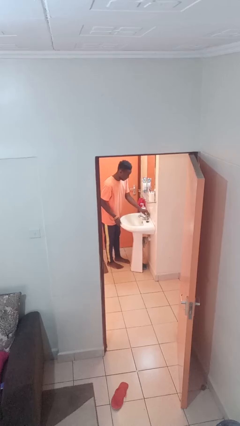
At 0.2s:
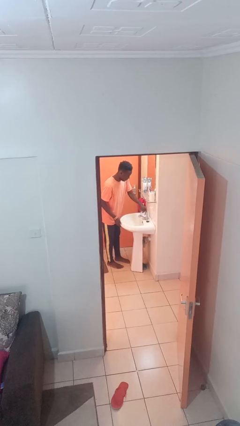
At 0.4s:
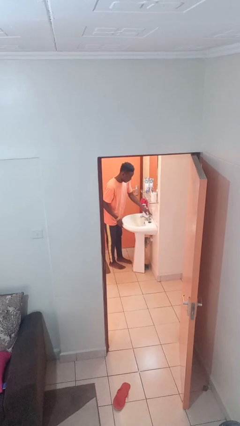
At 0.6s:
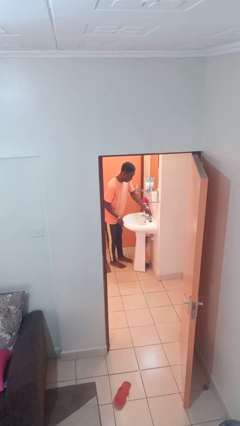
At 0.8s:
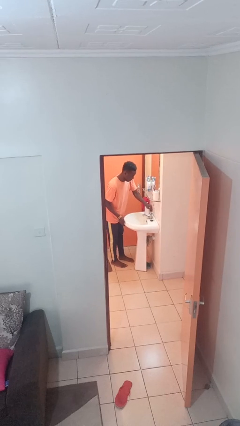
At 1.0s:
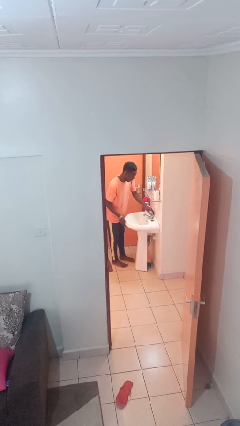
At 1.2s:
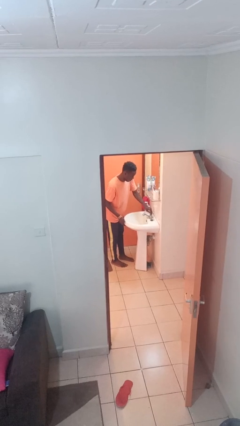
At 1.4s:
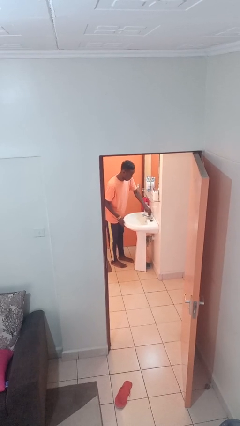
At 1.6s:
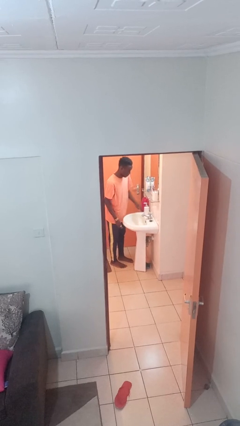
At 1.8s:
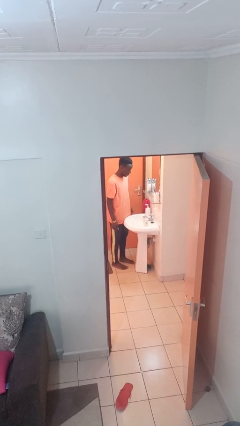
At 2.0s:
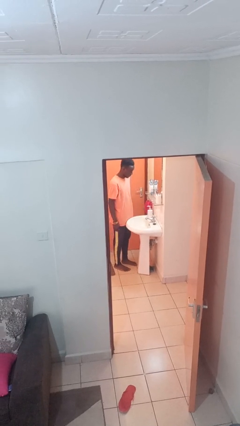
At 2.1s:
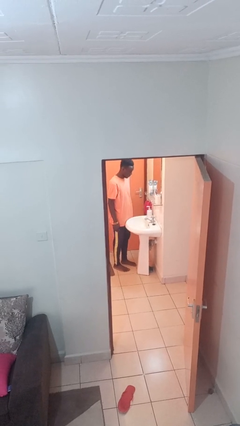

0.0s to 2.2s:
person turns off faucet

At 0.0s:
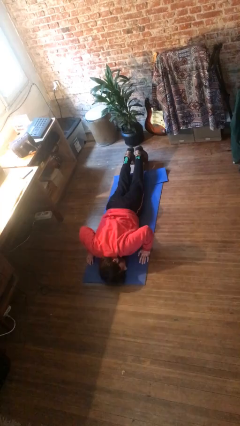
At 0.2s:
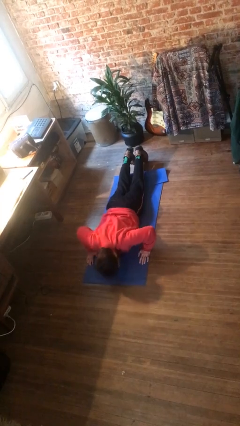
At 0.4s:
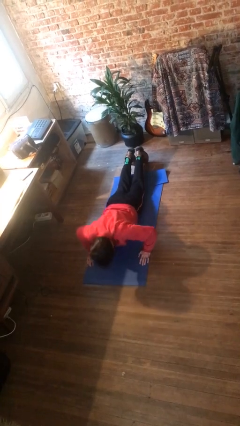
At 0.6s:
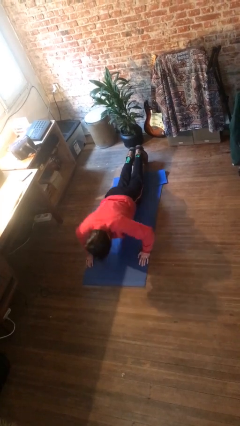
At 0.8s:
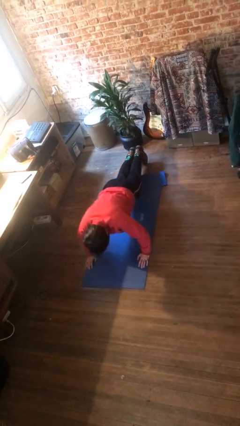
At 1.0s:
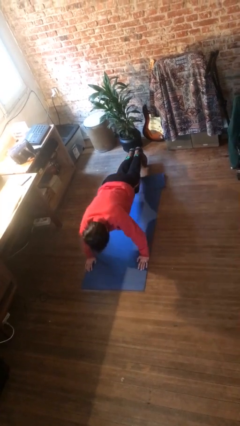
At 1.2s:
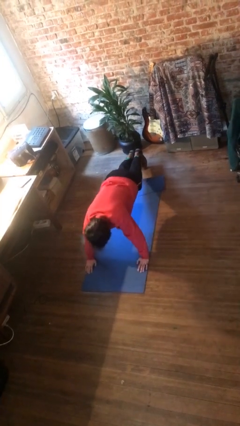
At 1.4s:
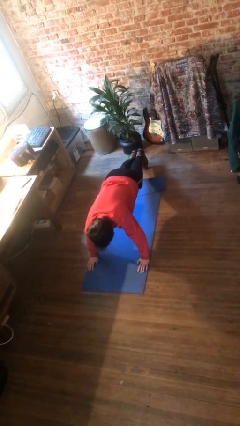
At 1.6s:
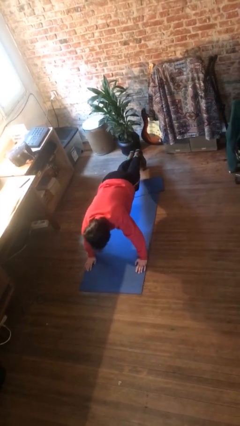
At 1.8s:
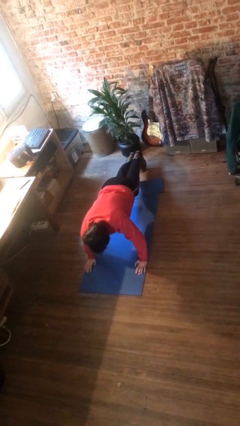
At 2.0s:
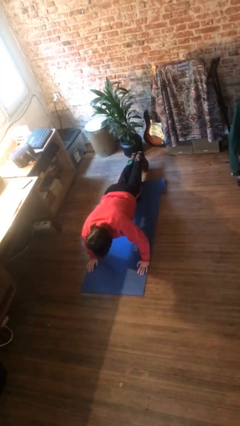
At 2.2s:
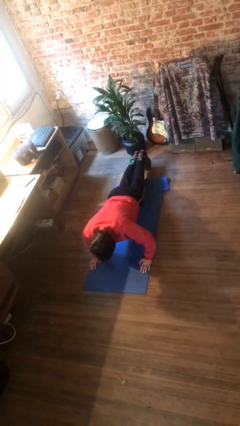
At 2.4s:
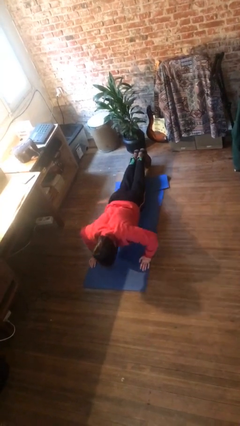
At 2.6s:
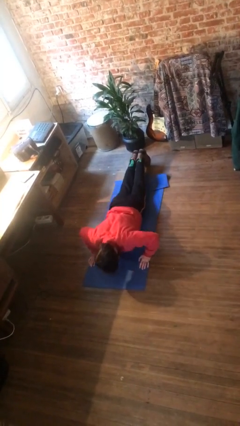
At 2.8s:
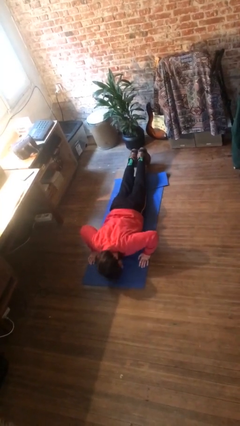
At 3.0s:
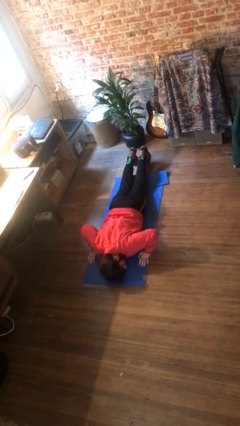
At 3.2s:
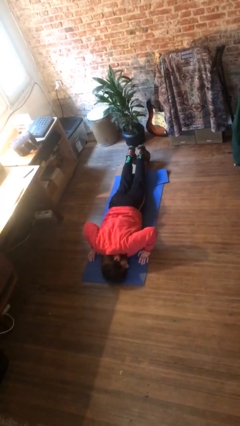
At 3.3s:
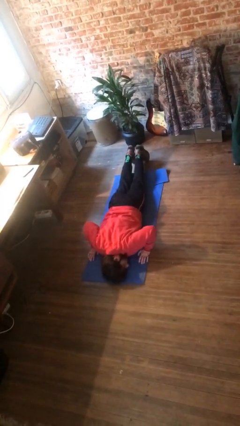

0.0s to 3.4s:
person exercises with pushup

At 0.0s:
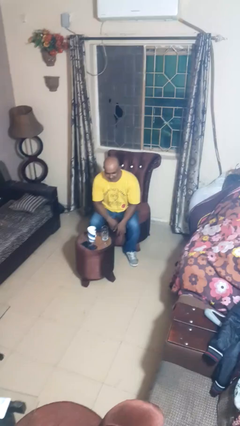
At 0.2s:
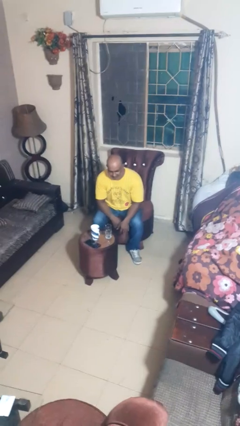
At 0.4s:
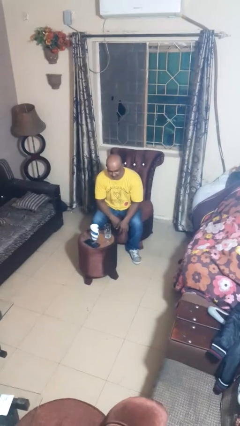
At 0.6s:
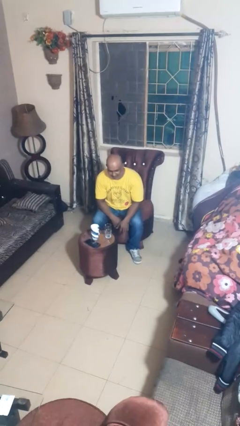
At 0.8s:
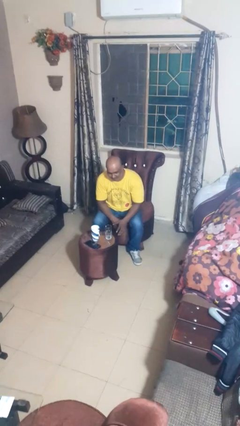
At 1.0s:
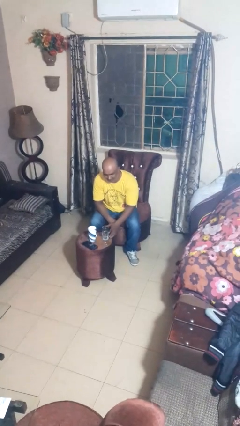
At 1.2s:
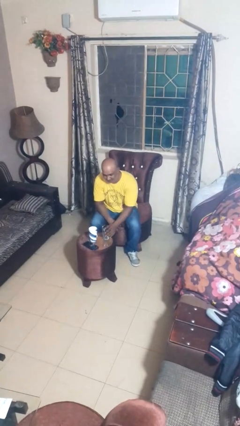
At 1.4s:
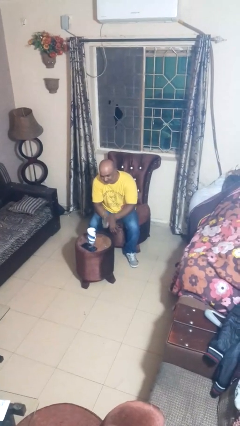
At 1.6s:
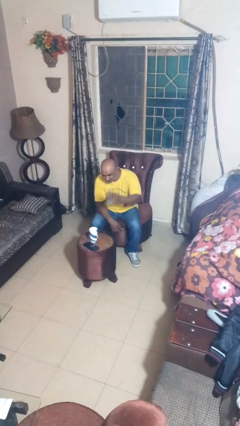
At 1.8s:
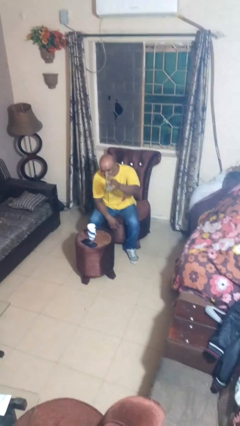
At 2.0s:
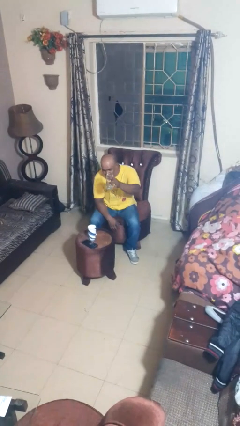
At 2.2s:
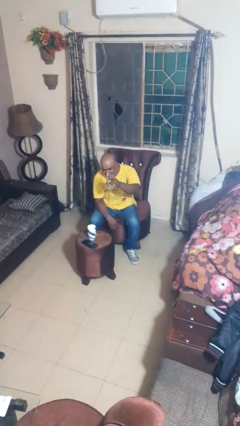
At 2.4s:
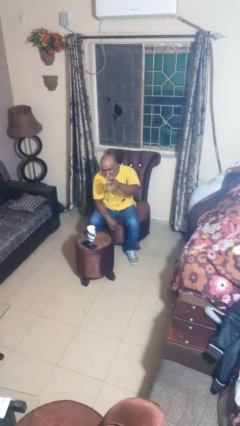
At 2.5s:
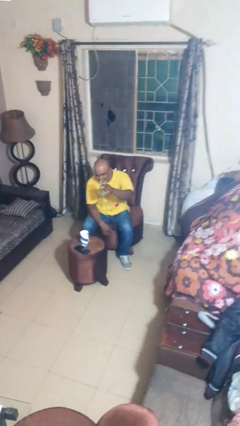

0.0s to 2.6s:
person picks up object from table

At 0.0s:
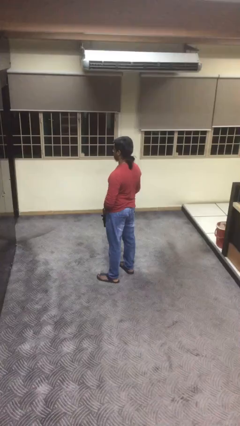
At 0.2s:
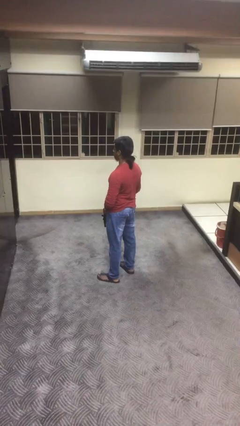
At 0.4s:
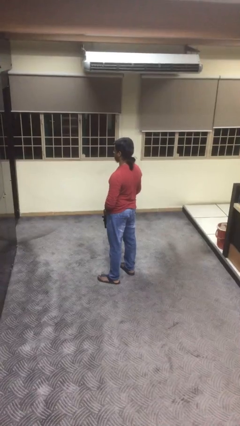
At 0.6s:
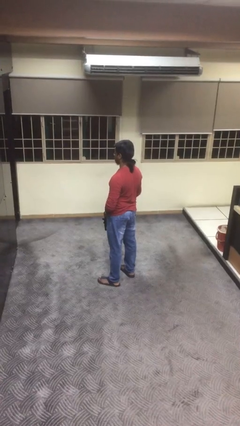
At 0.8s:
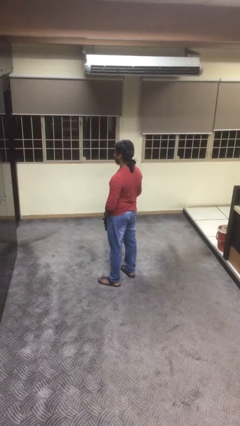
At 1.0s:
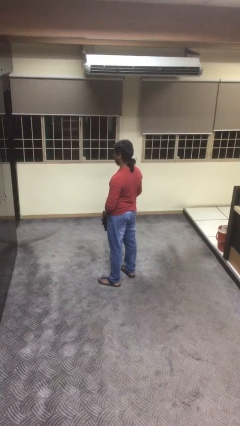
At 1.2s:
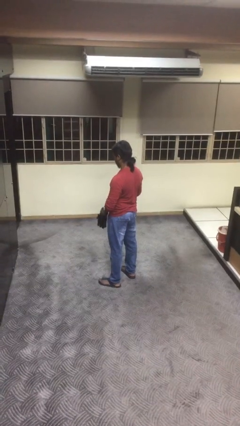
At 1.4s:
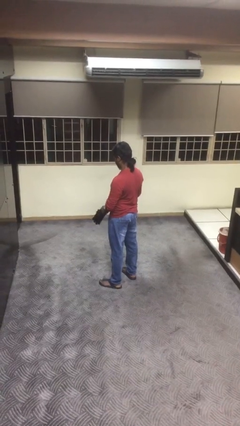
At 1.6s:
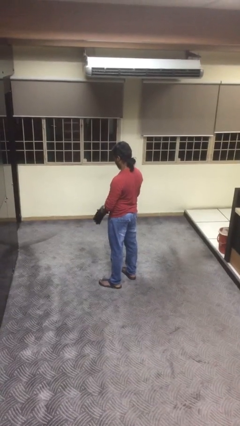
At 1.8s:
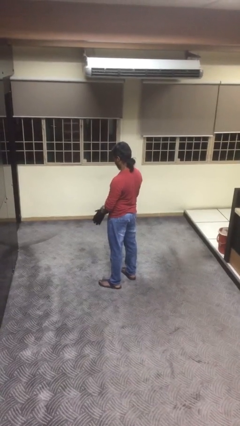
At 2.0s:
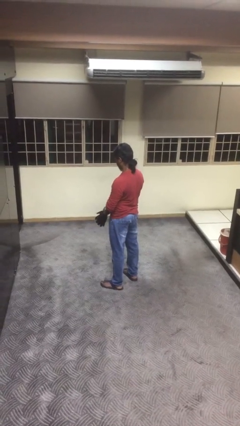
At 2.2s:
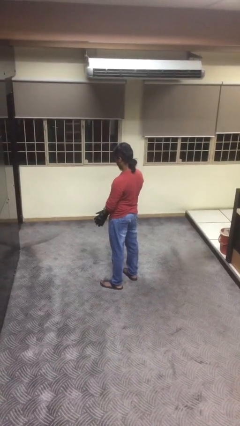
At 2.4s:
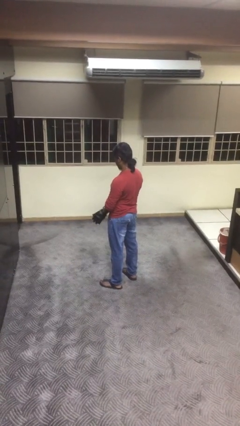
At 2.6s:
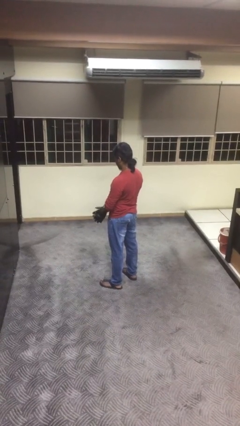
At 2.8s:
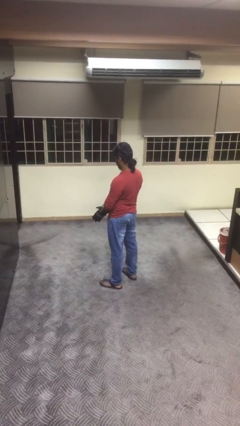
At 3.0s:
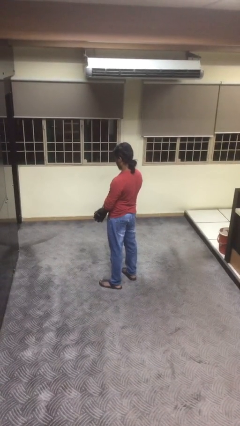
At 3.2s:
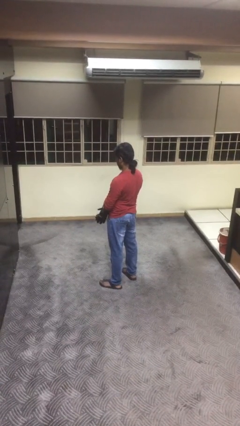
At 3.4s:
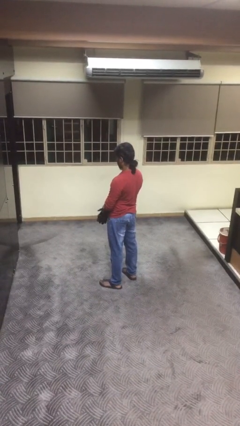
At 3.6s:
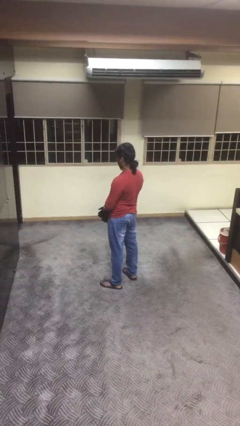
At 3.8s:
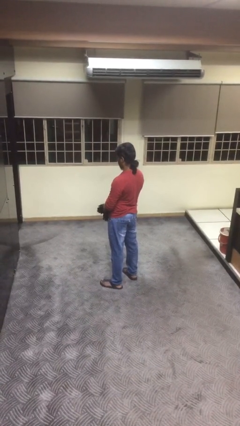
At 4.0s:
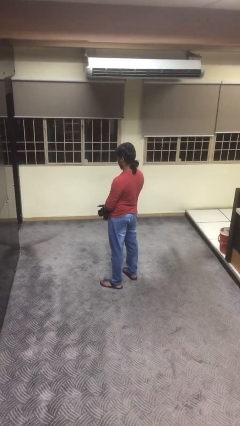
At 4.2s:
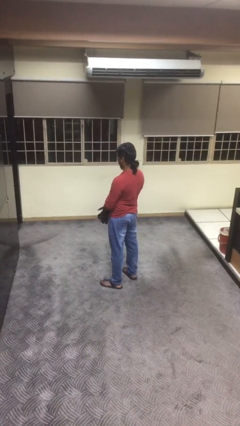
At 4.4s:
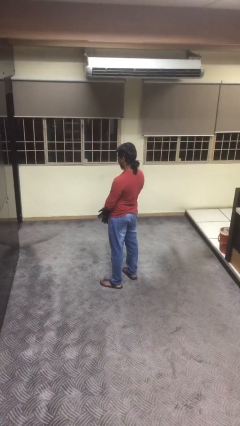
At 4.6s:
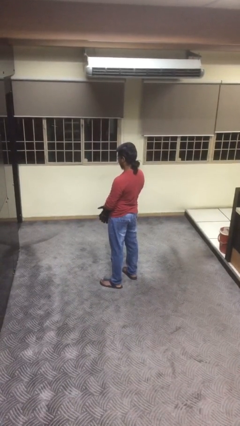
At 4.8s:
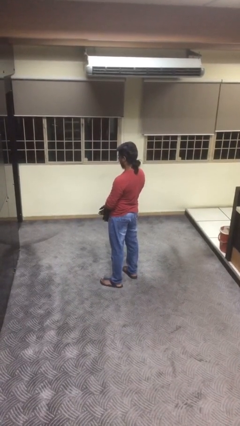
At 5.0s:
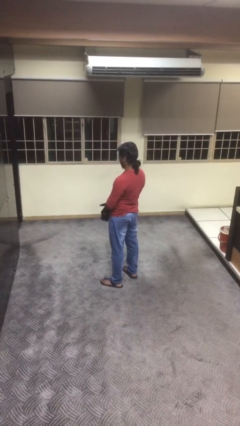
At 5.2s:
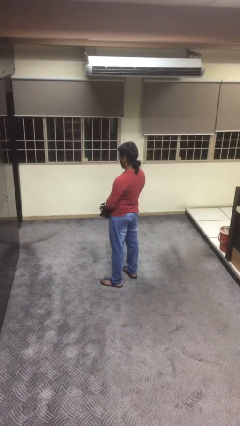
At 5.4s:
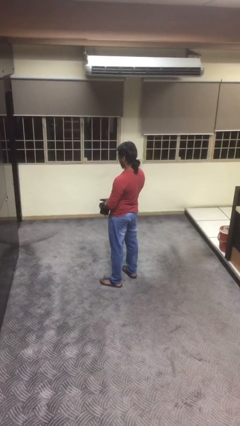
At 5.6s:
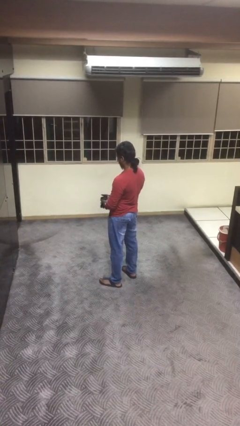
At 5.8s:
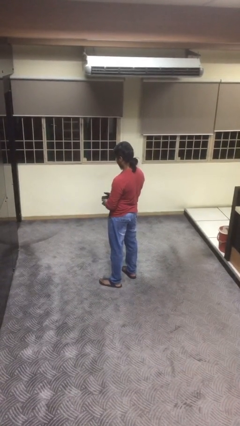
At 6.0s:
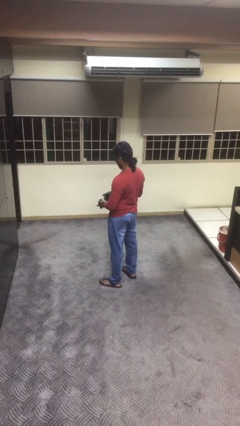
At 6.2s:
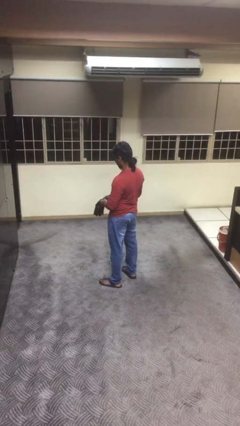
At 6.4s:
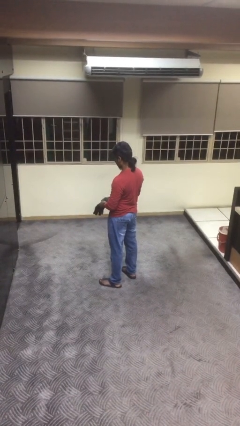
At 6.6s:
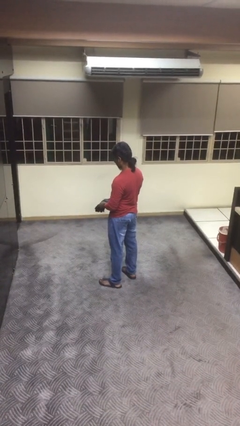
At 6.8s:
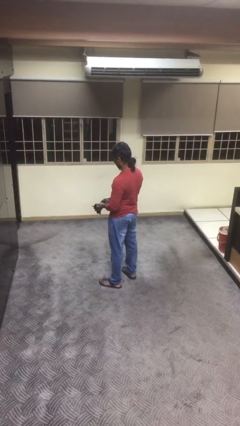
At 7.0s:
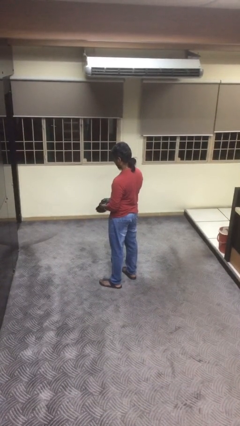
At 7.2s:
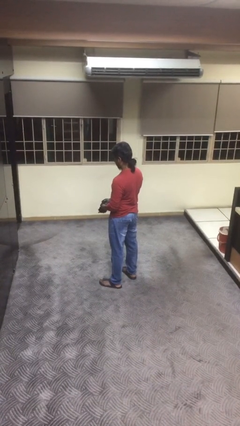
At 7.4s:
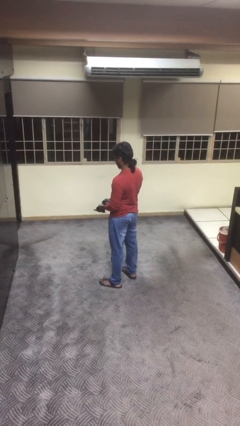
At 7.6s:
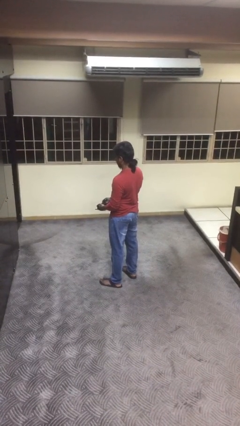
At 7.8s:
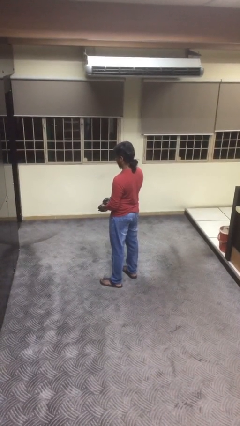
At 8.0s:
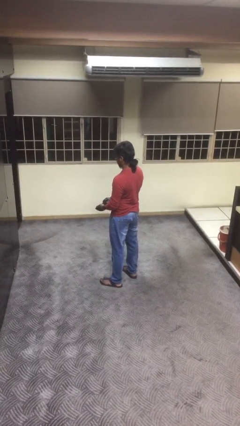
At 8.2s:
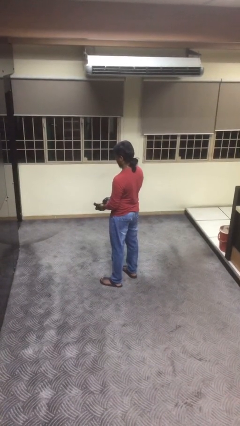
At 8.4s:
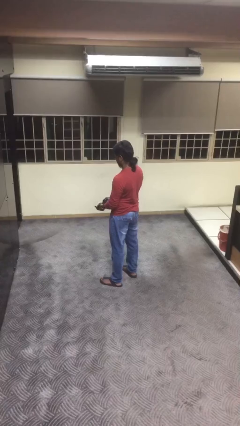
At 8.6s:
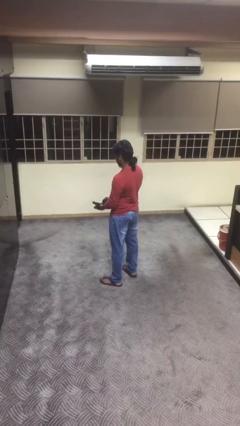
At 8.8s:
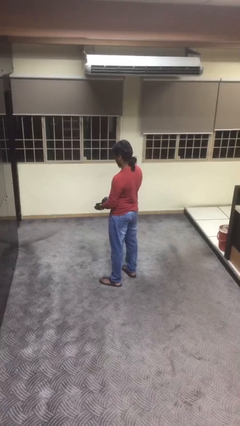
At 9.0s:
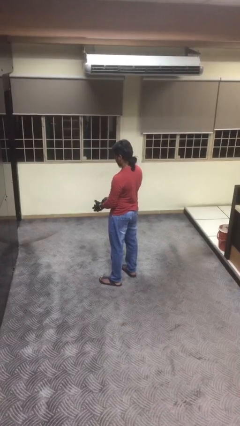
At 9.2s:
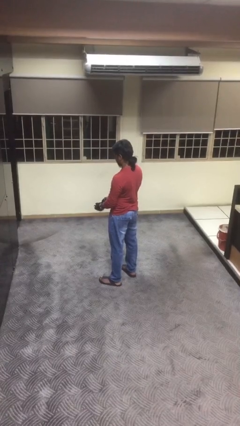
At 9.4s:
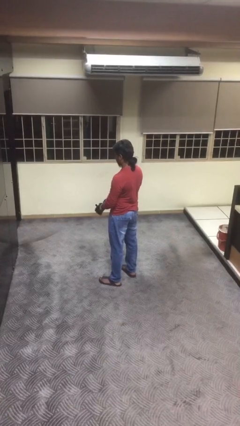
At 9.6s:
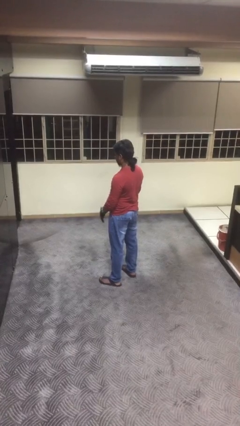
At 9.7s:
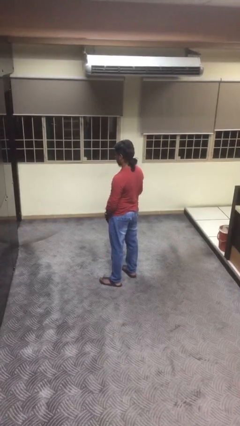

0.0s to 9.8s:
person puts on gloves
